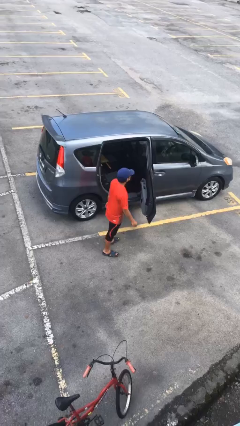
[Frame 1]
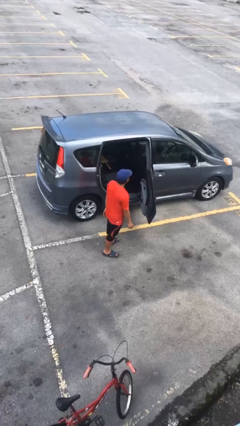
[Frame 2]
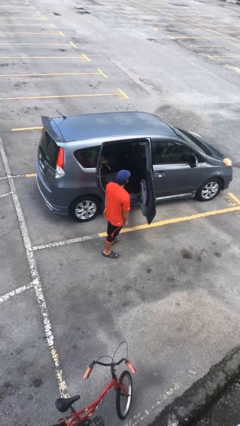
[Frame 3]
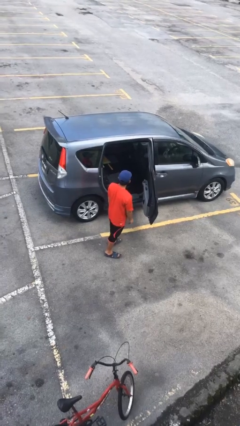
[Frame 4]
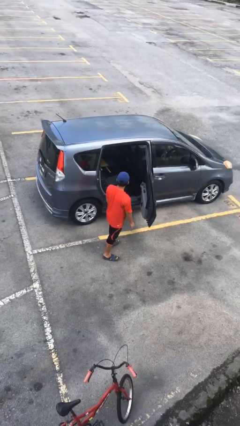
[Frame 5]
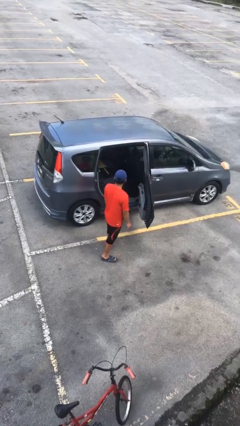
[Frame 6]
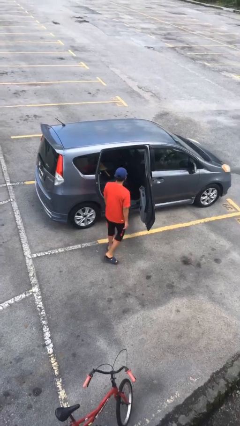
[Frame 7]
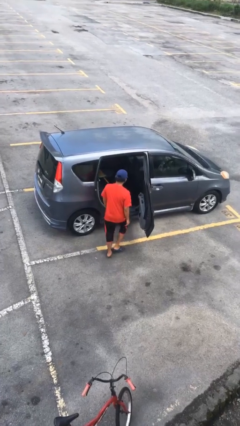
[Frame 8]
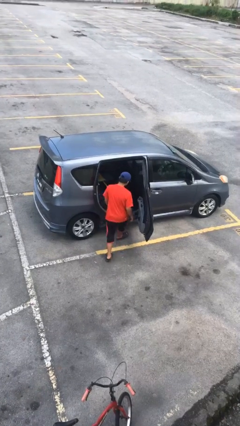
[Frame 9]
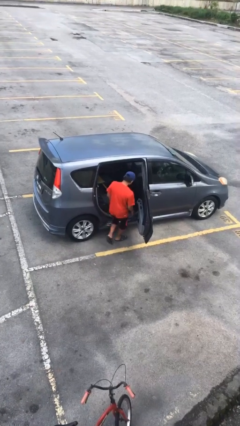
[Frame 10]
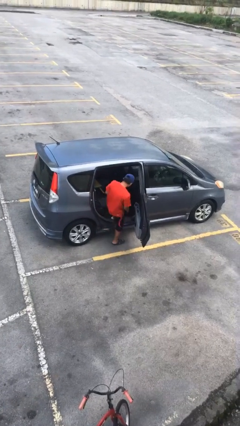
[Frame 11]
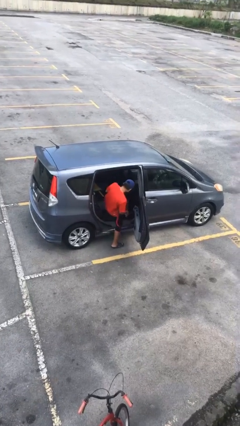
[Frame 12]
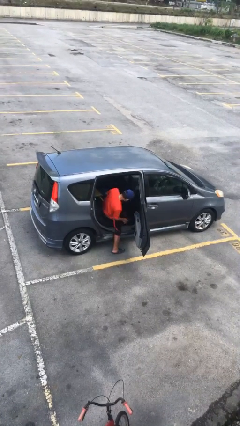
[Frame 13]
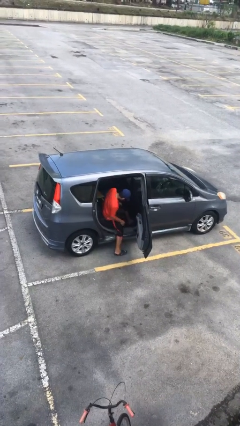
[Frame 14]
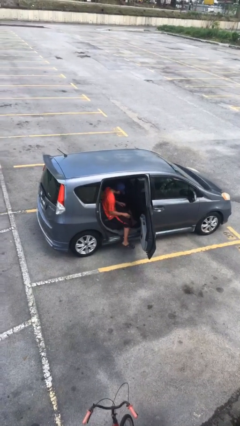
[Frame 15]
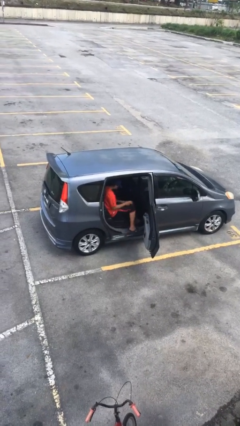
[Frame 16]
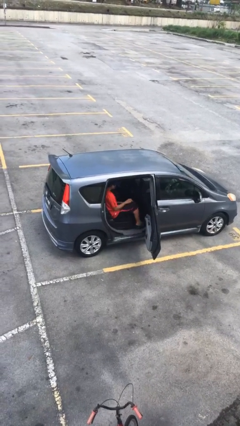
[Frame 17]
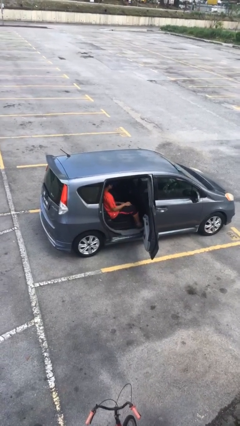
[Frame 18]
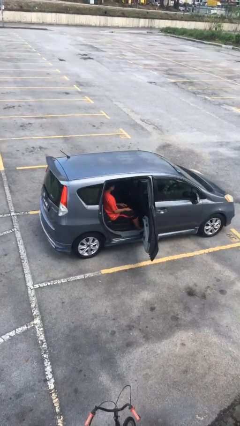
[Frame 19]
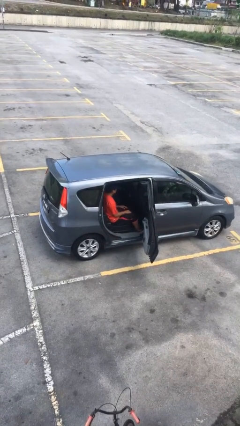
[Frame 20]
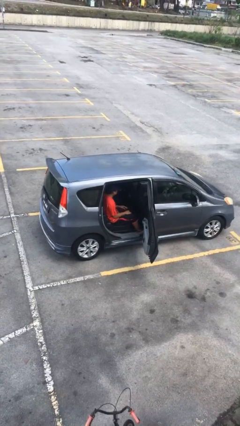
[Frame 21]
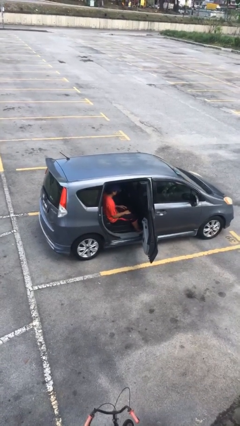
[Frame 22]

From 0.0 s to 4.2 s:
person enters car

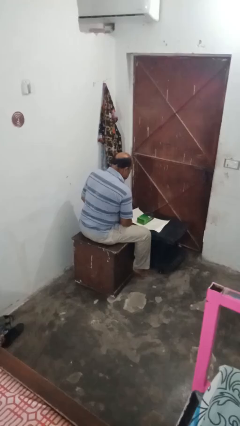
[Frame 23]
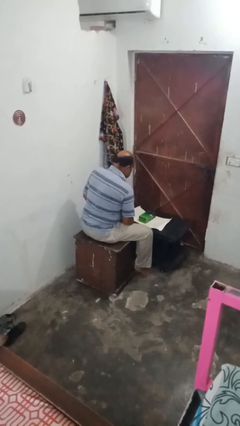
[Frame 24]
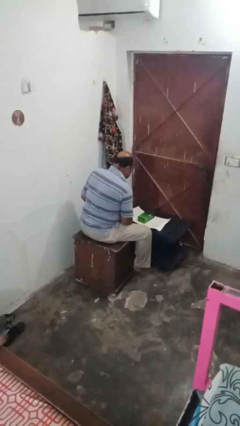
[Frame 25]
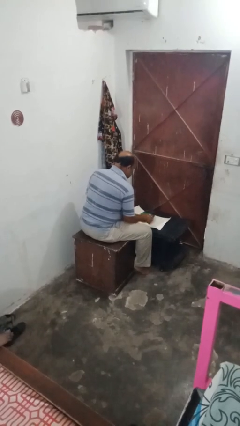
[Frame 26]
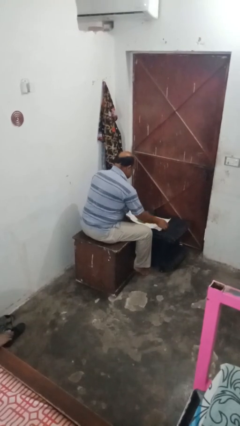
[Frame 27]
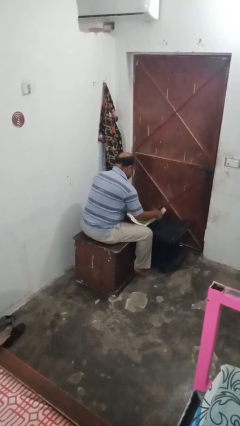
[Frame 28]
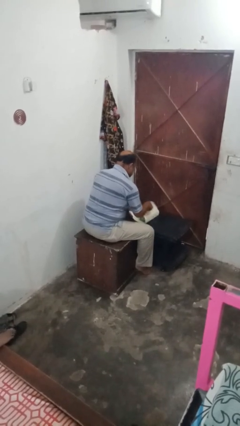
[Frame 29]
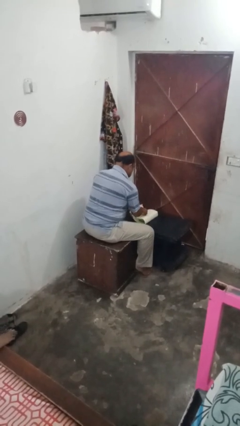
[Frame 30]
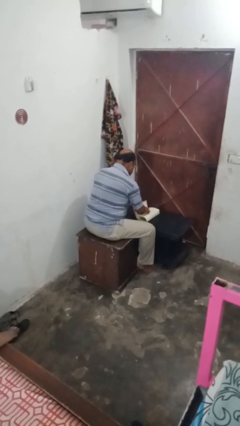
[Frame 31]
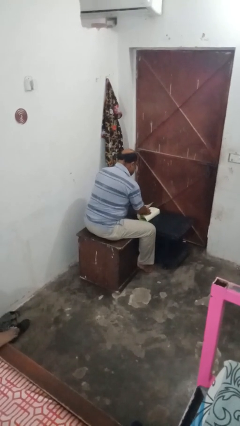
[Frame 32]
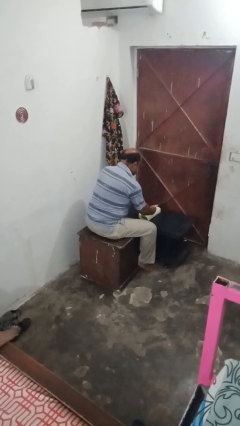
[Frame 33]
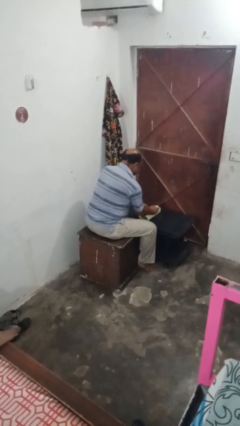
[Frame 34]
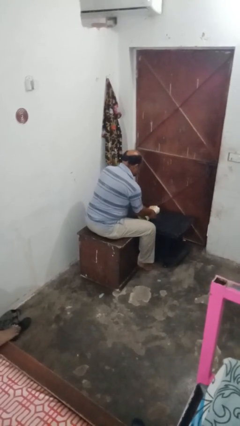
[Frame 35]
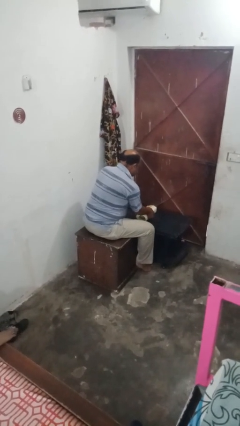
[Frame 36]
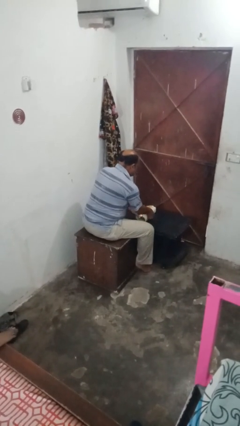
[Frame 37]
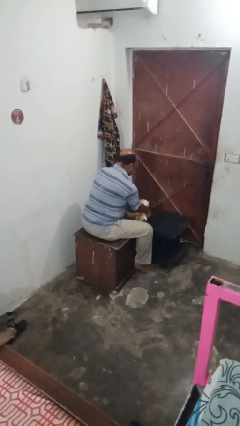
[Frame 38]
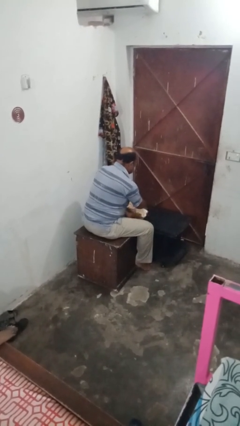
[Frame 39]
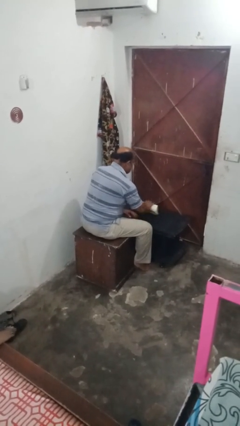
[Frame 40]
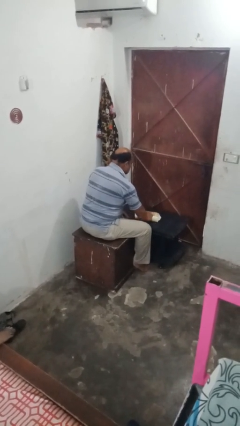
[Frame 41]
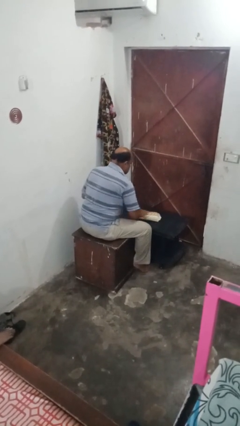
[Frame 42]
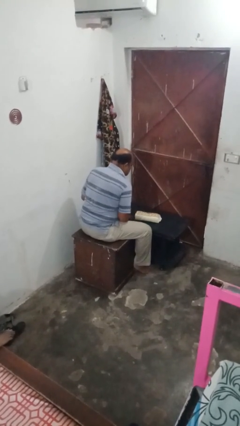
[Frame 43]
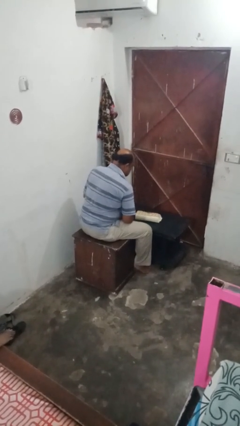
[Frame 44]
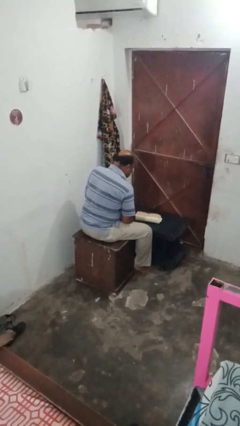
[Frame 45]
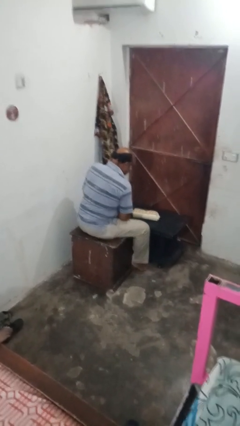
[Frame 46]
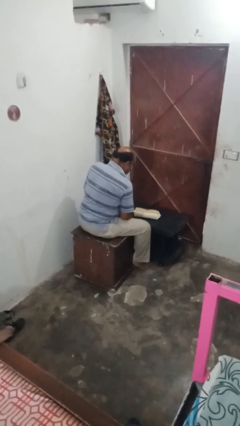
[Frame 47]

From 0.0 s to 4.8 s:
person wraps box

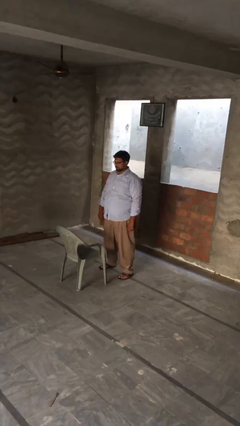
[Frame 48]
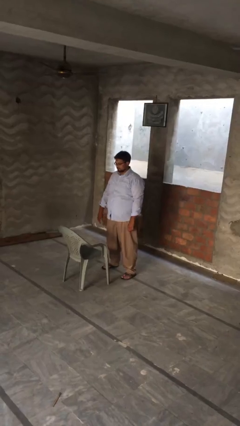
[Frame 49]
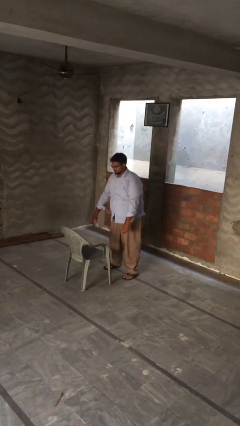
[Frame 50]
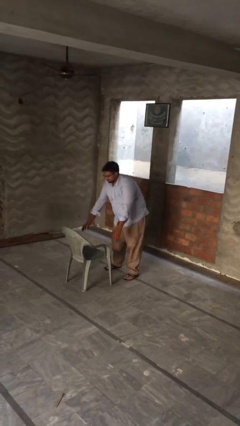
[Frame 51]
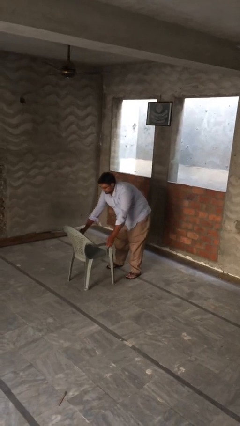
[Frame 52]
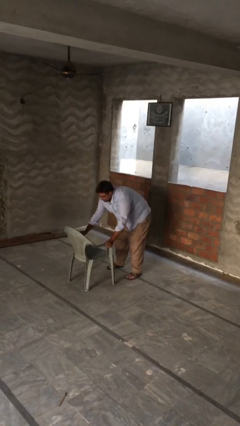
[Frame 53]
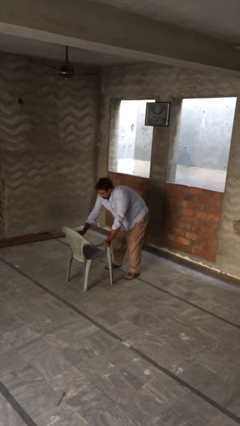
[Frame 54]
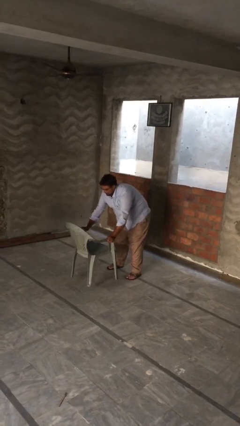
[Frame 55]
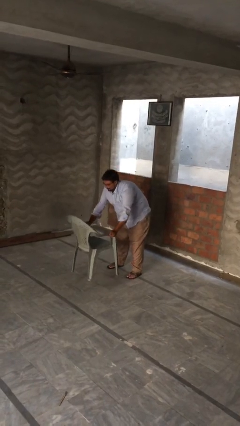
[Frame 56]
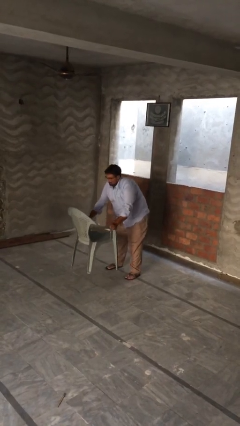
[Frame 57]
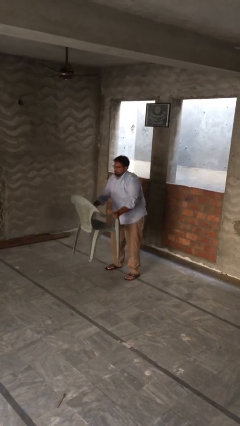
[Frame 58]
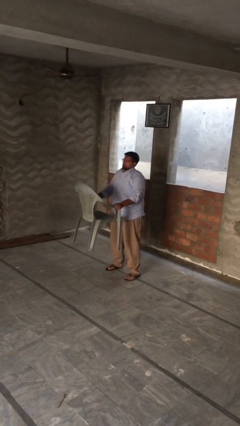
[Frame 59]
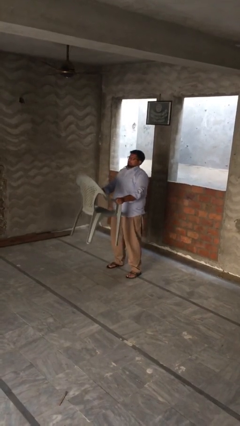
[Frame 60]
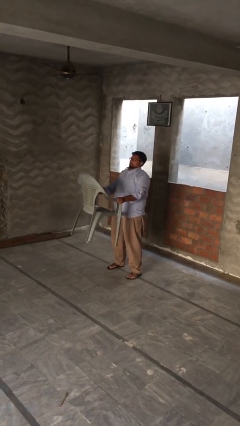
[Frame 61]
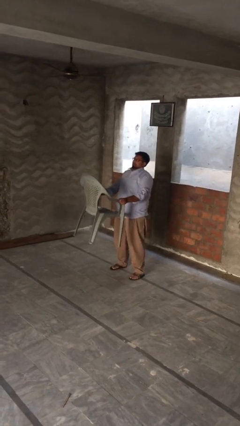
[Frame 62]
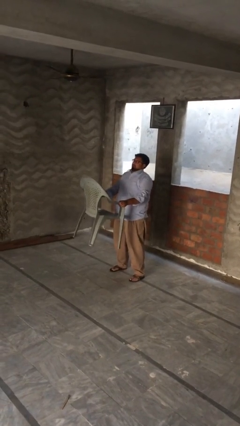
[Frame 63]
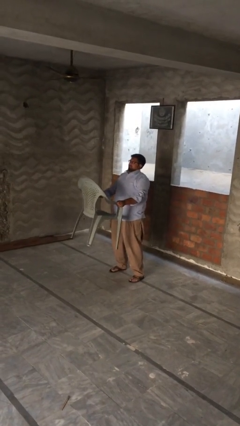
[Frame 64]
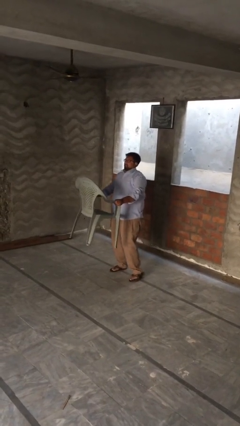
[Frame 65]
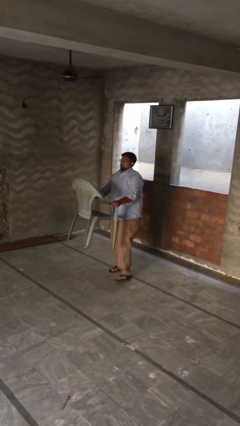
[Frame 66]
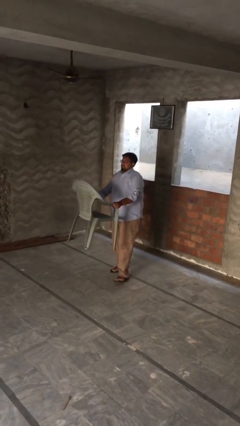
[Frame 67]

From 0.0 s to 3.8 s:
person picks up object from floor

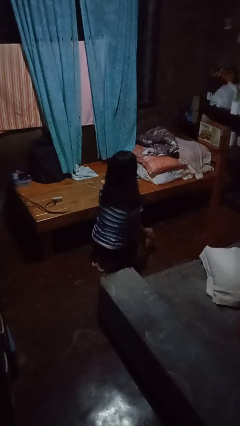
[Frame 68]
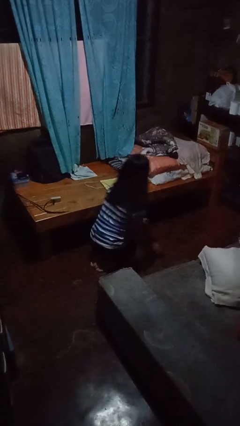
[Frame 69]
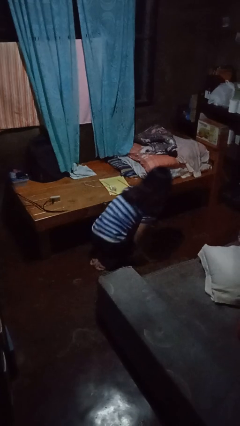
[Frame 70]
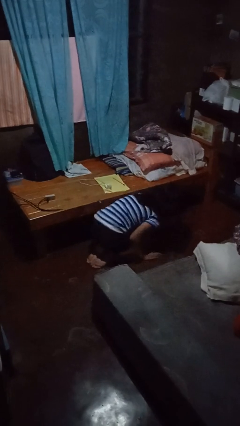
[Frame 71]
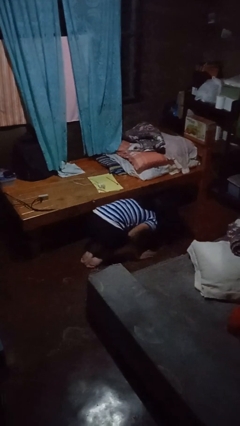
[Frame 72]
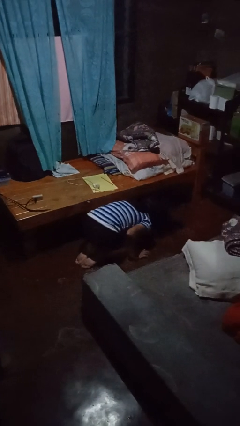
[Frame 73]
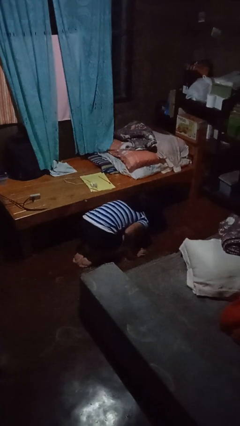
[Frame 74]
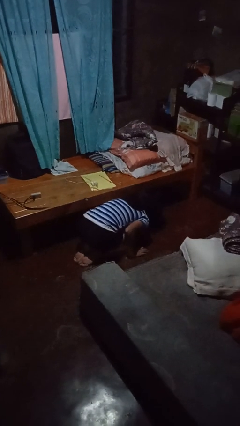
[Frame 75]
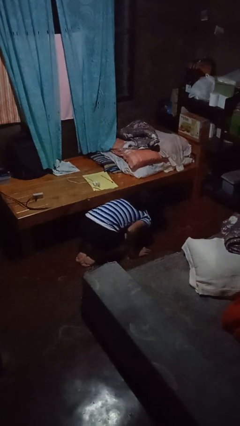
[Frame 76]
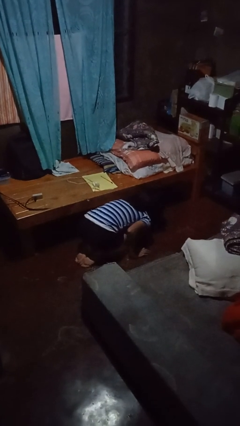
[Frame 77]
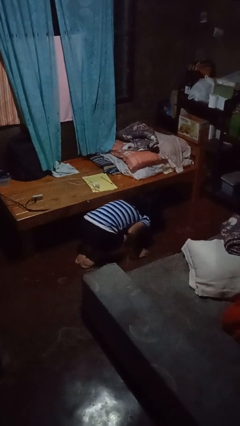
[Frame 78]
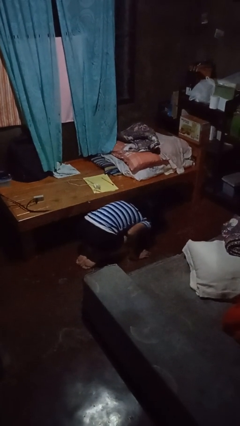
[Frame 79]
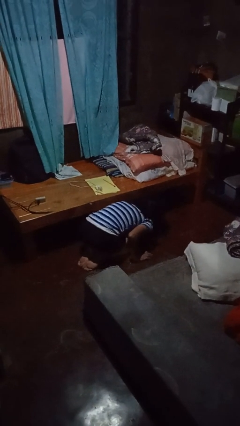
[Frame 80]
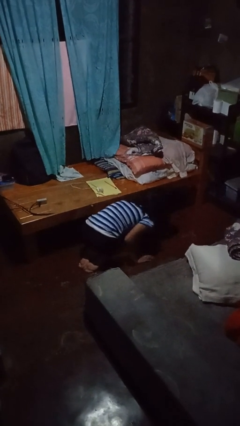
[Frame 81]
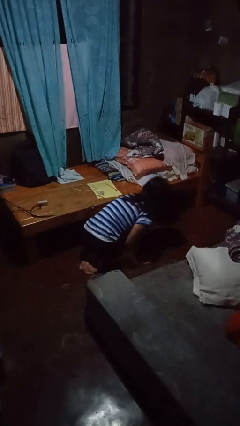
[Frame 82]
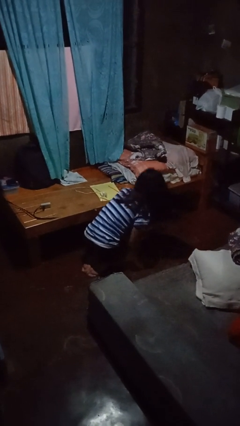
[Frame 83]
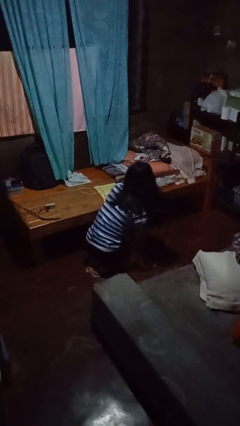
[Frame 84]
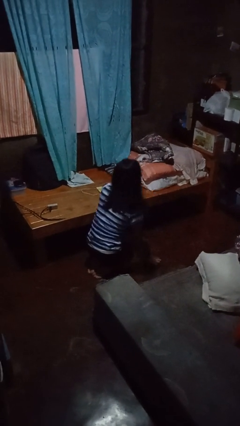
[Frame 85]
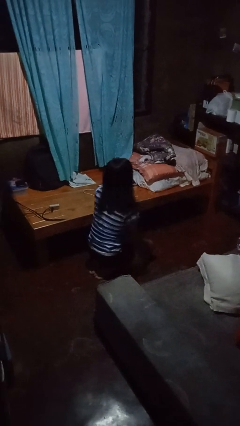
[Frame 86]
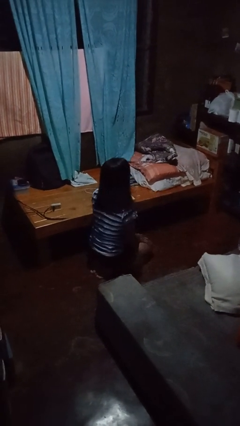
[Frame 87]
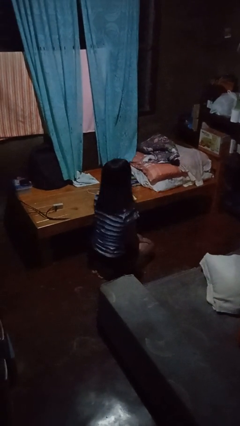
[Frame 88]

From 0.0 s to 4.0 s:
person searches under bed

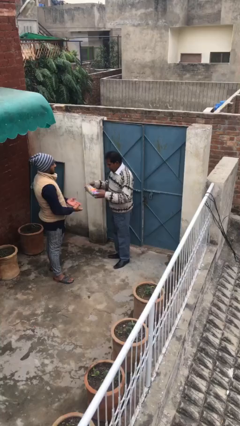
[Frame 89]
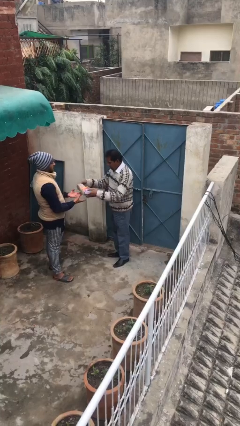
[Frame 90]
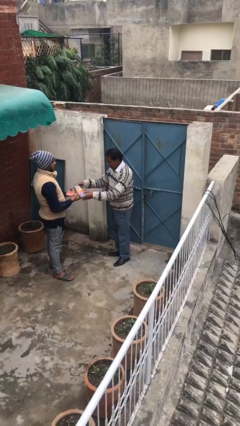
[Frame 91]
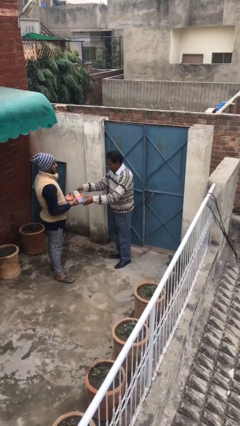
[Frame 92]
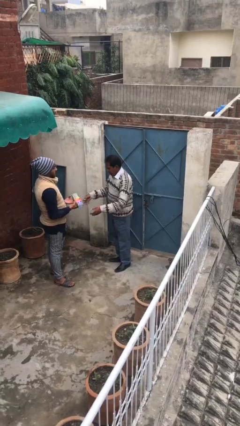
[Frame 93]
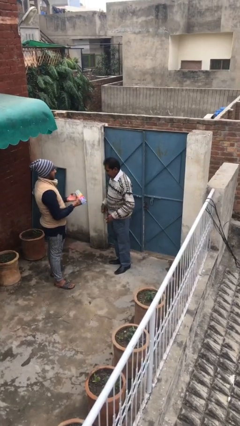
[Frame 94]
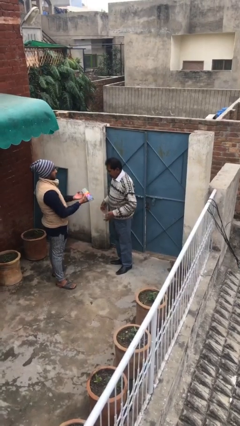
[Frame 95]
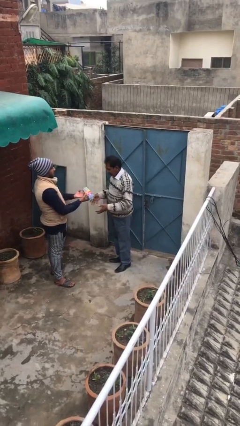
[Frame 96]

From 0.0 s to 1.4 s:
person transfers object to person
